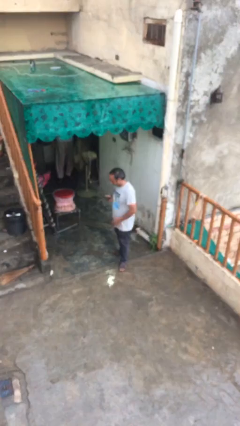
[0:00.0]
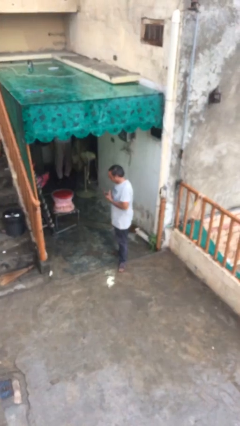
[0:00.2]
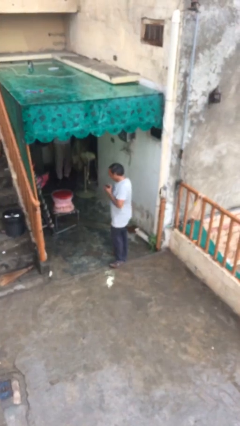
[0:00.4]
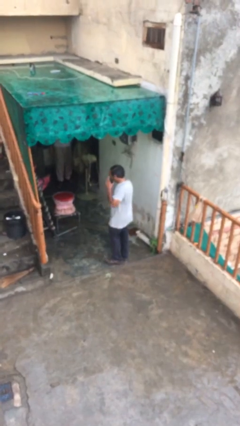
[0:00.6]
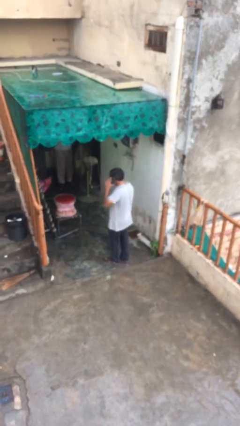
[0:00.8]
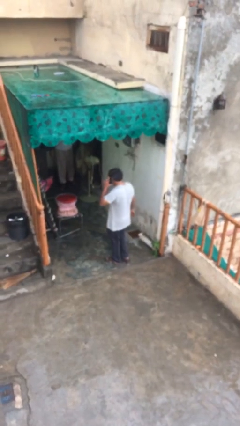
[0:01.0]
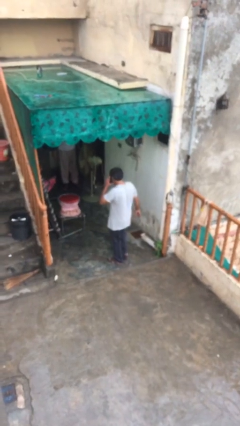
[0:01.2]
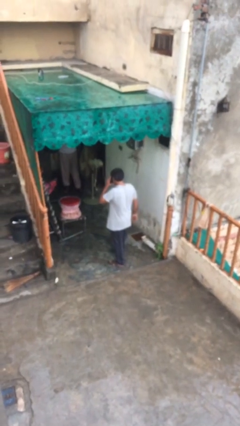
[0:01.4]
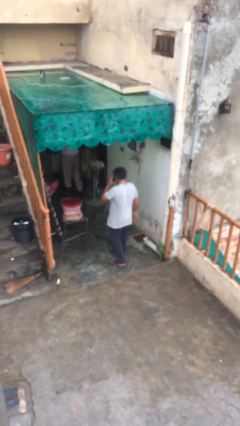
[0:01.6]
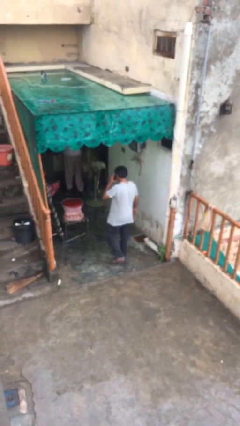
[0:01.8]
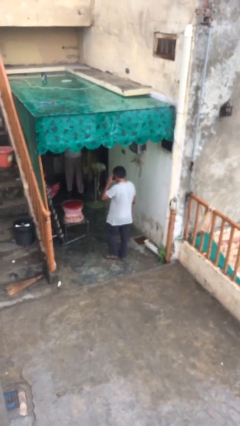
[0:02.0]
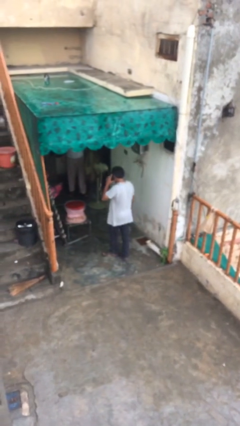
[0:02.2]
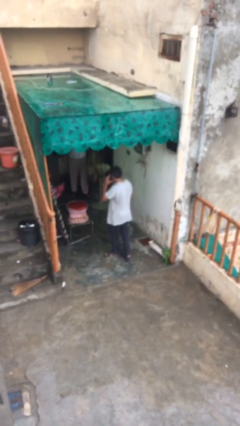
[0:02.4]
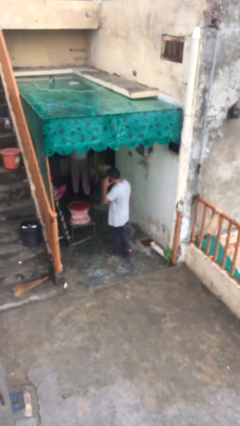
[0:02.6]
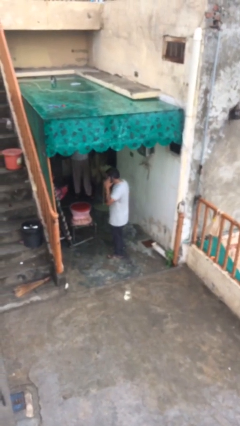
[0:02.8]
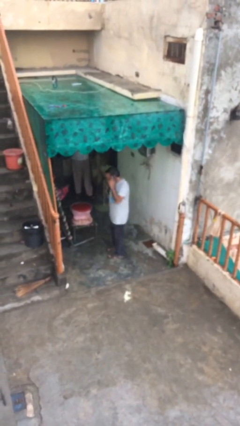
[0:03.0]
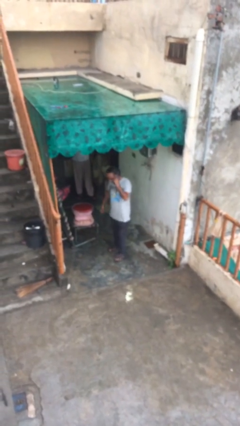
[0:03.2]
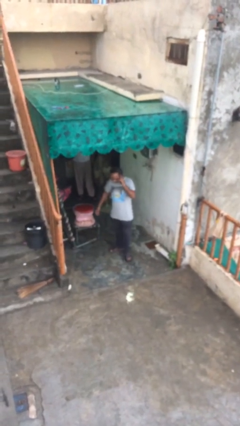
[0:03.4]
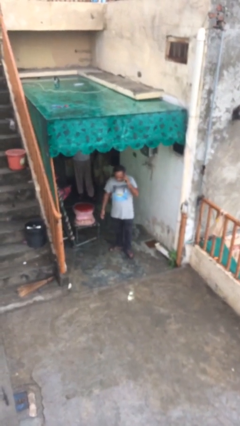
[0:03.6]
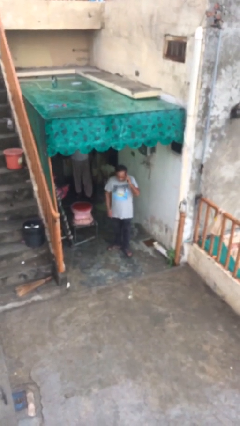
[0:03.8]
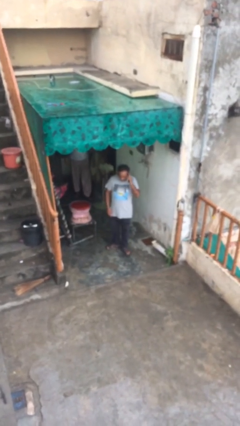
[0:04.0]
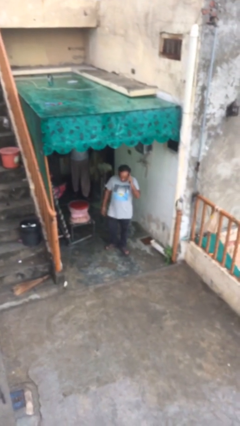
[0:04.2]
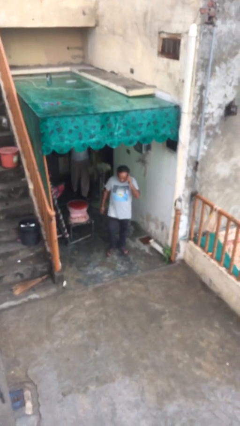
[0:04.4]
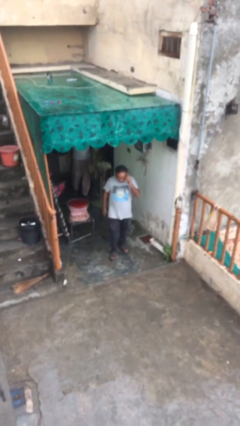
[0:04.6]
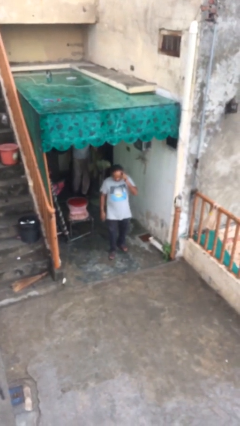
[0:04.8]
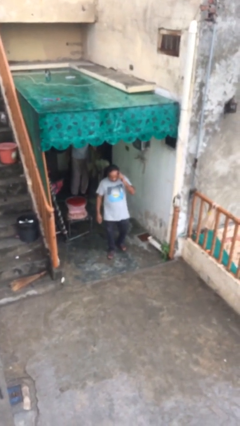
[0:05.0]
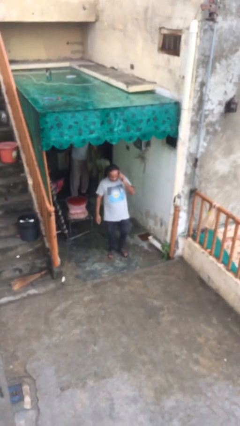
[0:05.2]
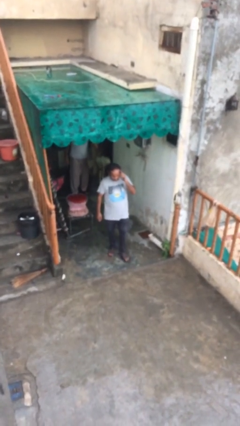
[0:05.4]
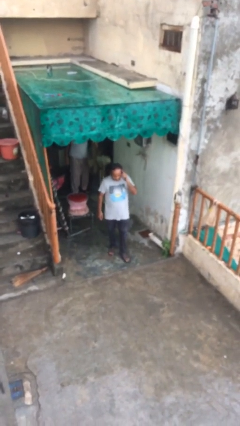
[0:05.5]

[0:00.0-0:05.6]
person talks on phone

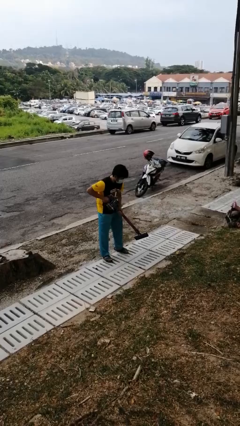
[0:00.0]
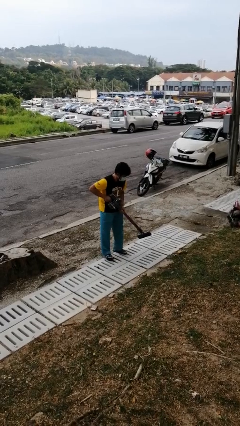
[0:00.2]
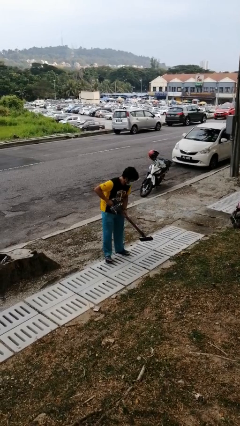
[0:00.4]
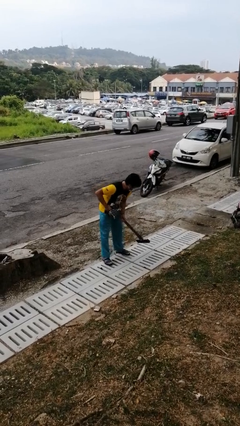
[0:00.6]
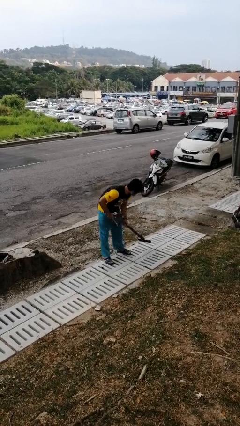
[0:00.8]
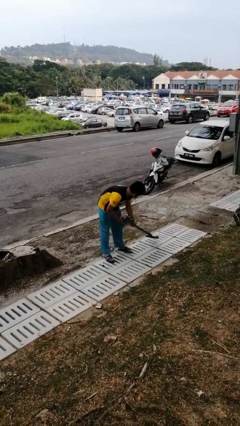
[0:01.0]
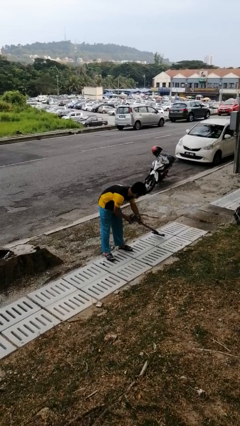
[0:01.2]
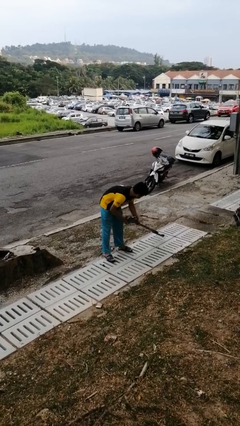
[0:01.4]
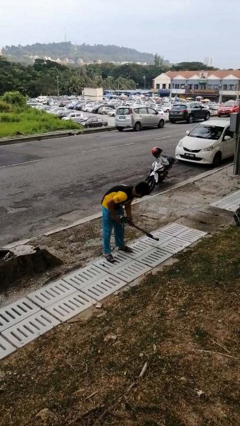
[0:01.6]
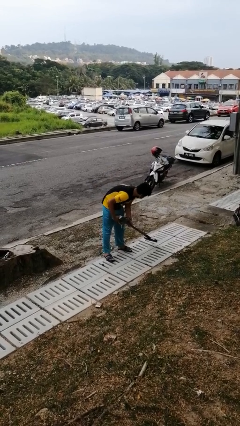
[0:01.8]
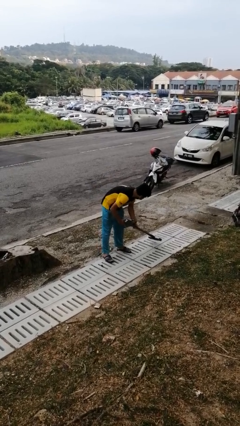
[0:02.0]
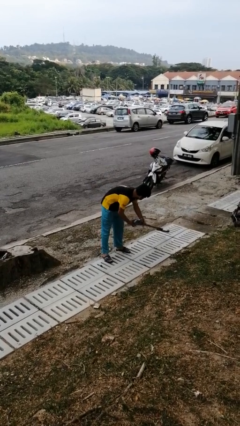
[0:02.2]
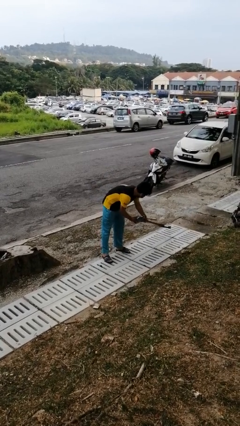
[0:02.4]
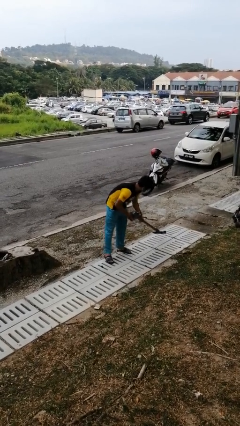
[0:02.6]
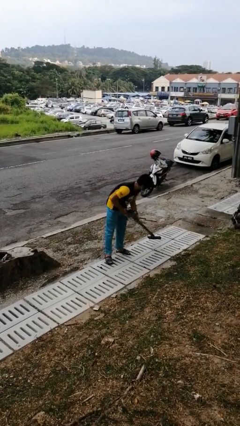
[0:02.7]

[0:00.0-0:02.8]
person vacuums carpet

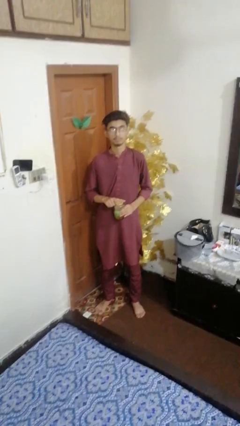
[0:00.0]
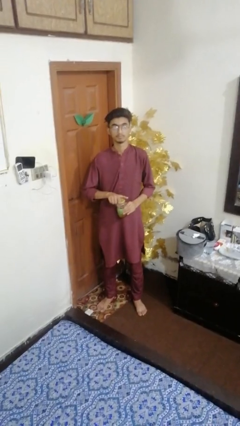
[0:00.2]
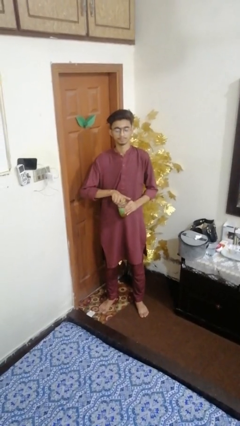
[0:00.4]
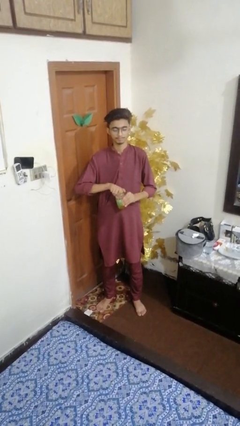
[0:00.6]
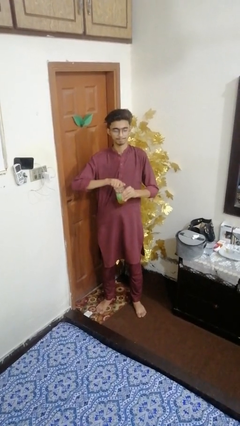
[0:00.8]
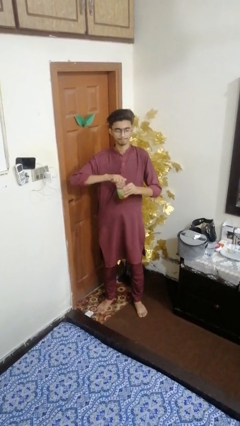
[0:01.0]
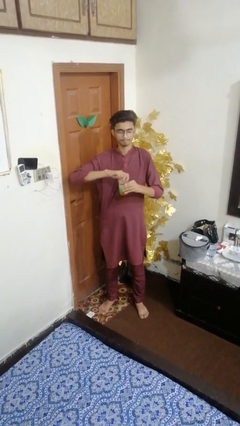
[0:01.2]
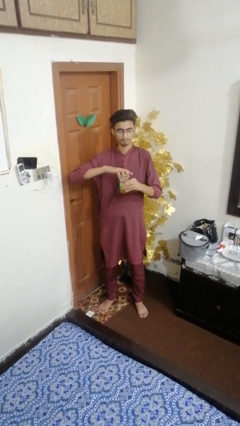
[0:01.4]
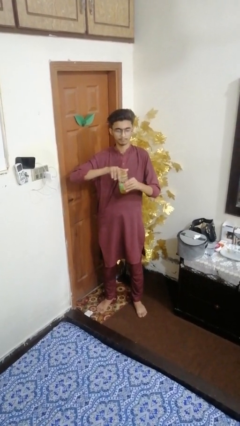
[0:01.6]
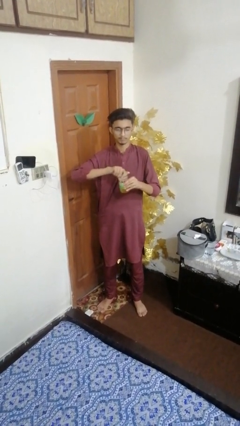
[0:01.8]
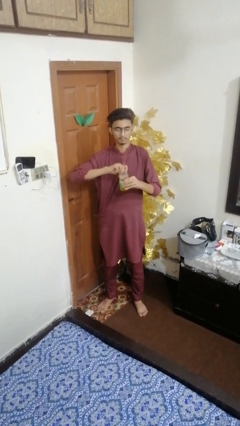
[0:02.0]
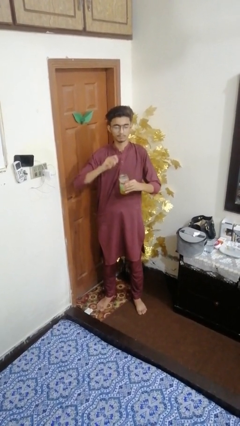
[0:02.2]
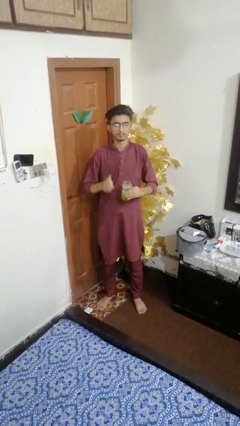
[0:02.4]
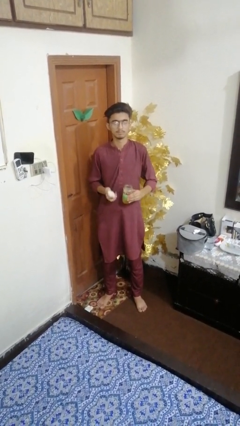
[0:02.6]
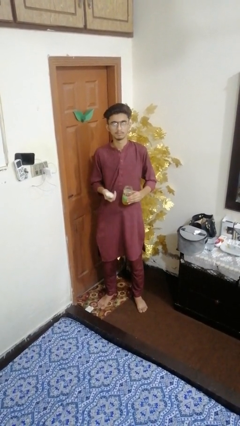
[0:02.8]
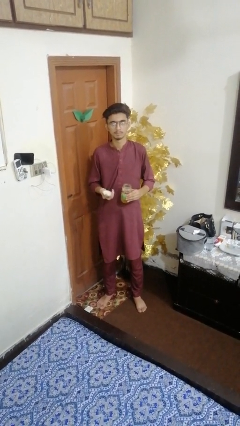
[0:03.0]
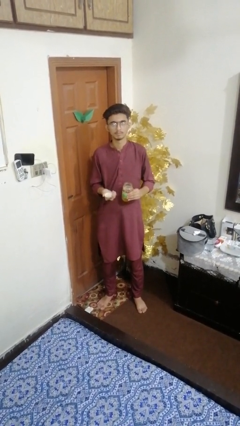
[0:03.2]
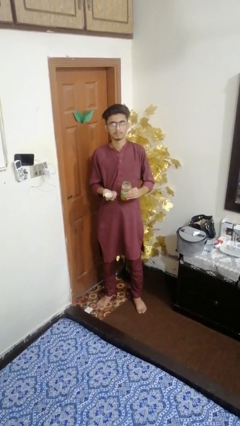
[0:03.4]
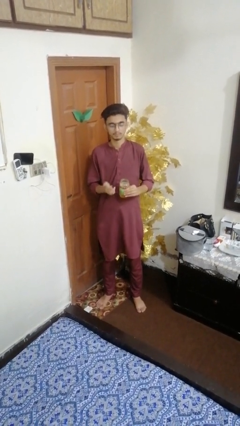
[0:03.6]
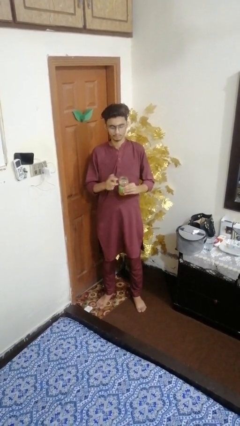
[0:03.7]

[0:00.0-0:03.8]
person opens jar

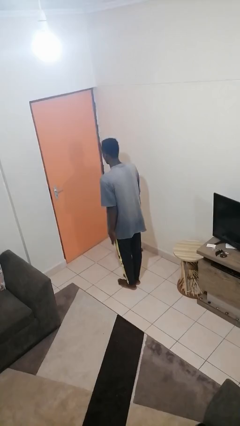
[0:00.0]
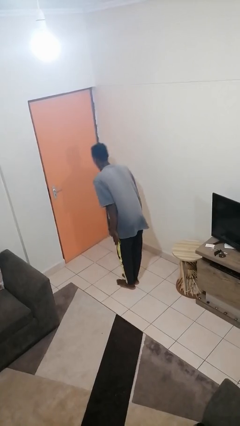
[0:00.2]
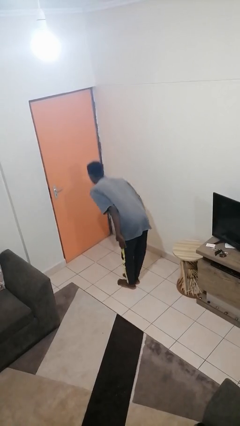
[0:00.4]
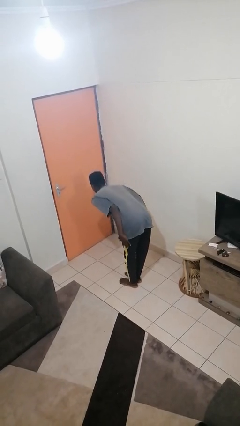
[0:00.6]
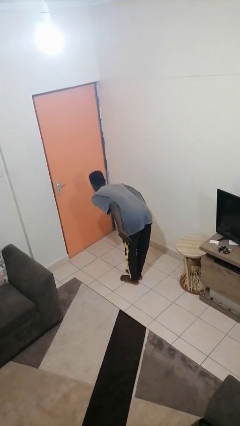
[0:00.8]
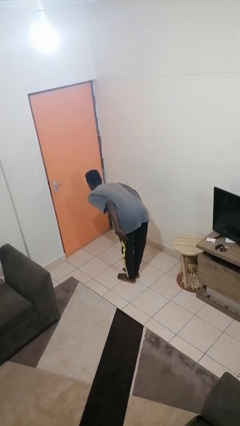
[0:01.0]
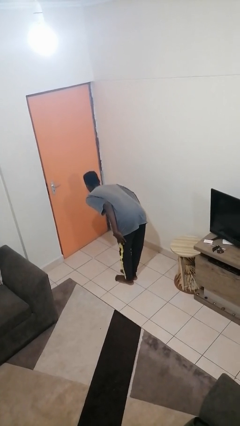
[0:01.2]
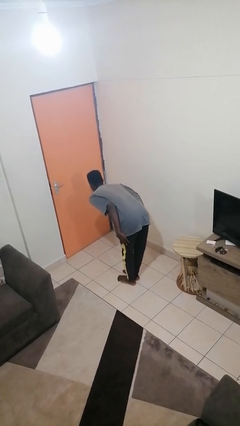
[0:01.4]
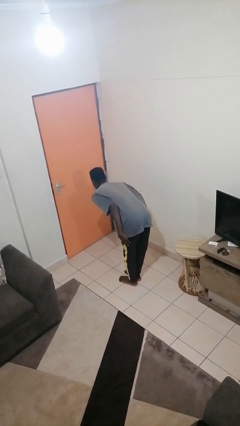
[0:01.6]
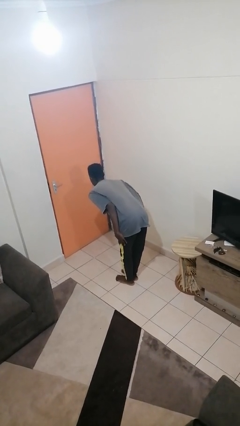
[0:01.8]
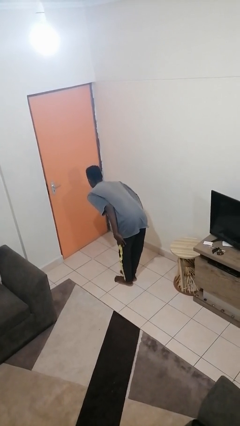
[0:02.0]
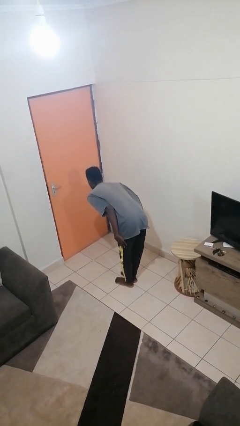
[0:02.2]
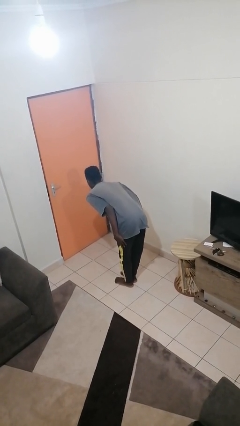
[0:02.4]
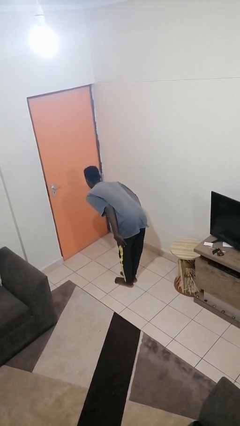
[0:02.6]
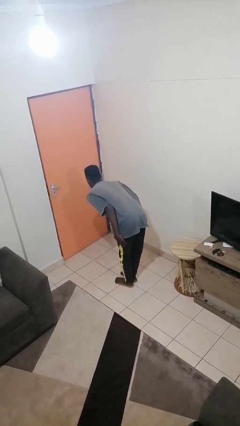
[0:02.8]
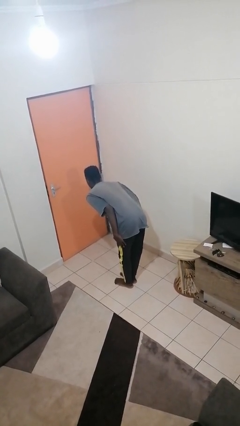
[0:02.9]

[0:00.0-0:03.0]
person bows

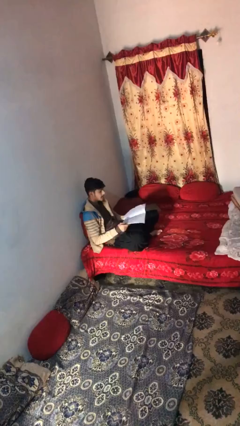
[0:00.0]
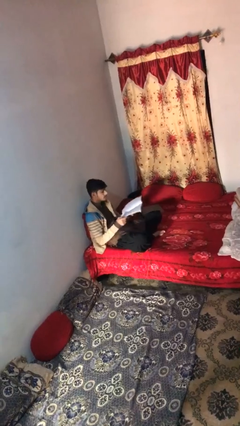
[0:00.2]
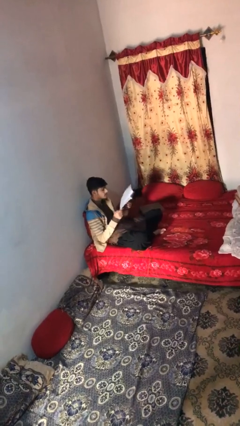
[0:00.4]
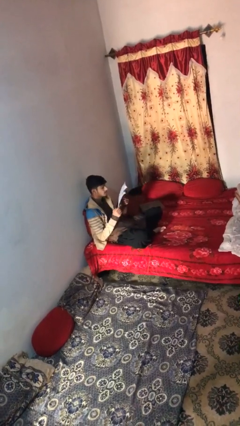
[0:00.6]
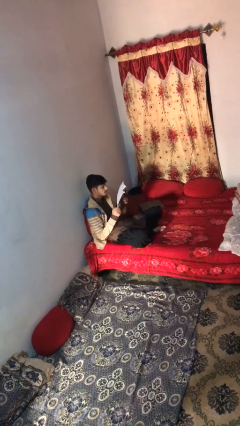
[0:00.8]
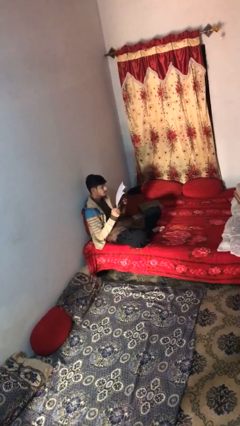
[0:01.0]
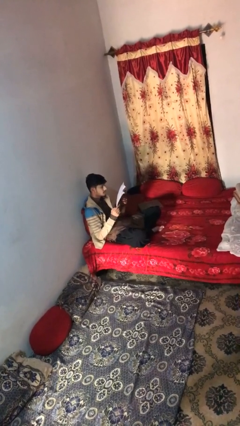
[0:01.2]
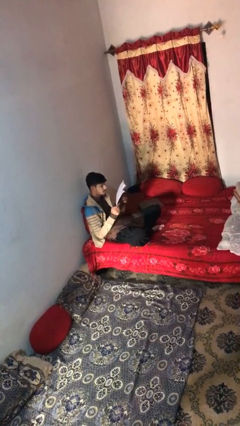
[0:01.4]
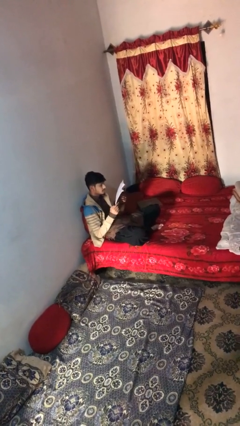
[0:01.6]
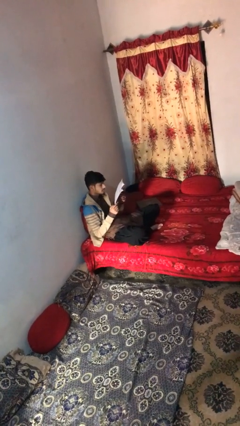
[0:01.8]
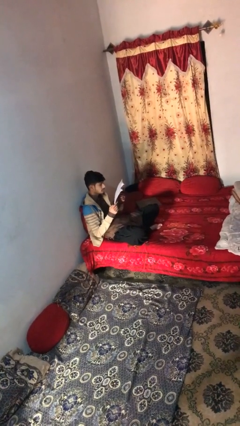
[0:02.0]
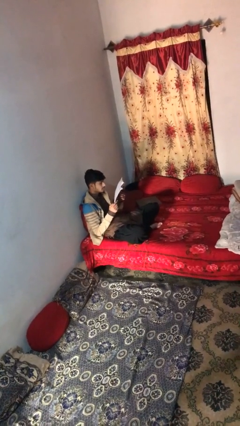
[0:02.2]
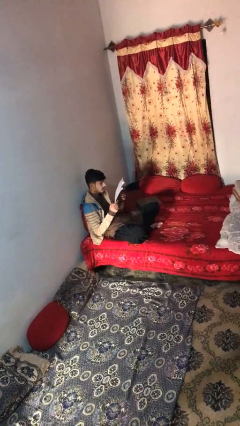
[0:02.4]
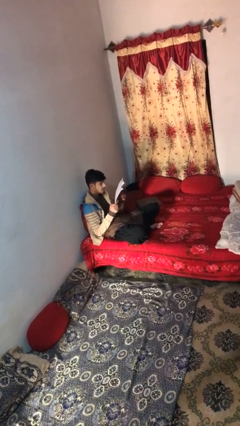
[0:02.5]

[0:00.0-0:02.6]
person reads document
